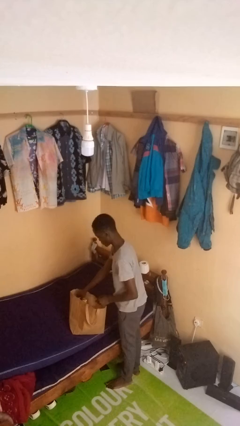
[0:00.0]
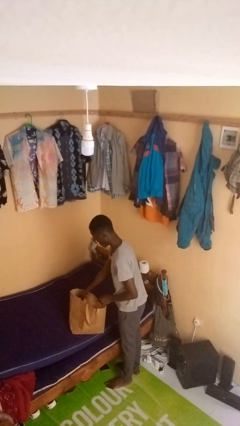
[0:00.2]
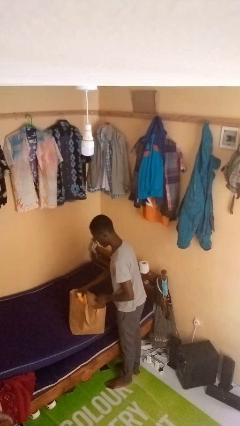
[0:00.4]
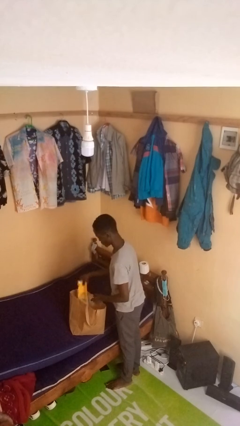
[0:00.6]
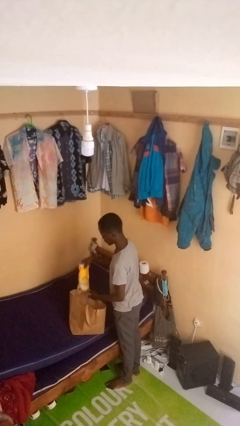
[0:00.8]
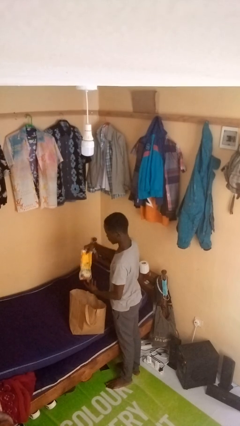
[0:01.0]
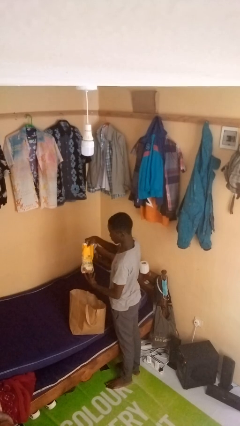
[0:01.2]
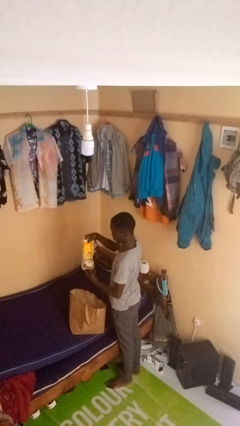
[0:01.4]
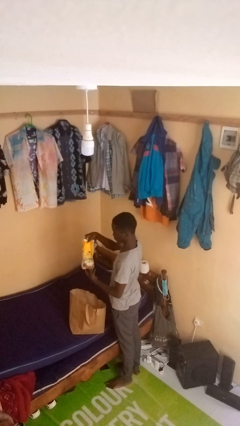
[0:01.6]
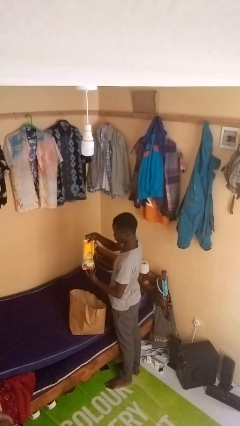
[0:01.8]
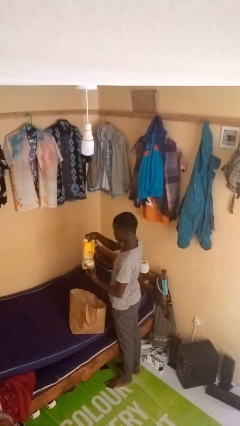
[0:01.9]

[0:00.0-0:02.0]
person takes object from bag

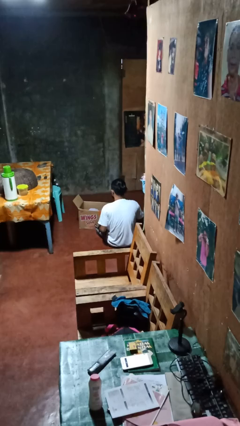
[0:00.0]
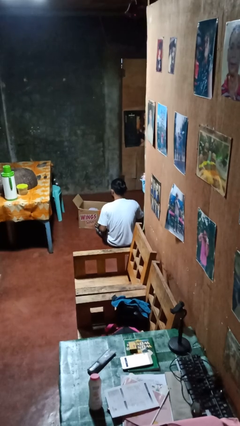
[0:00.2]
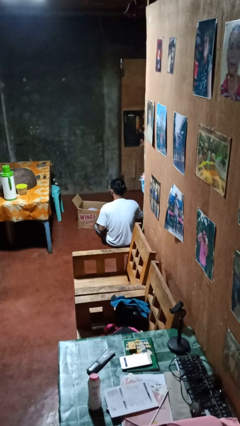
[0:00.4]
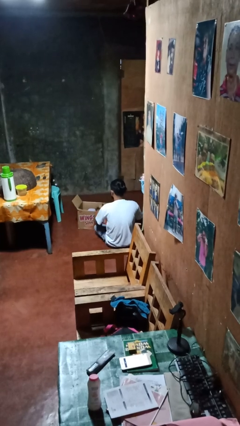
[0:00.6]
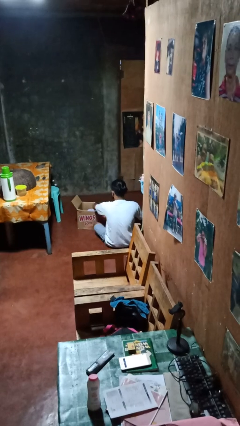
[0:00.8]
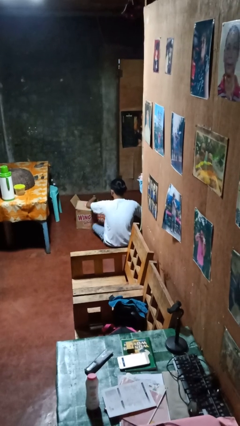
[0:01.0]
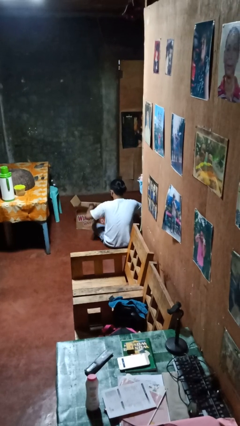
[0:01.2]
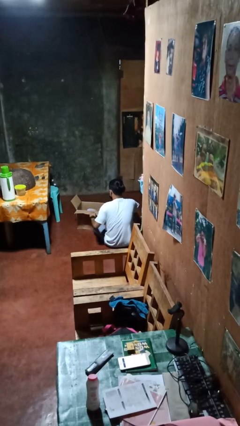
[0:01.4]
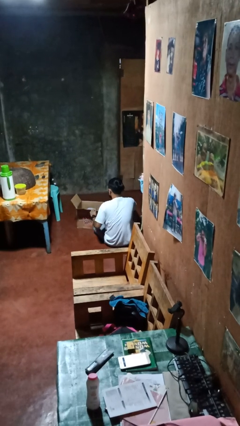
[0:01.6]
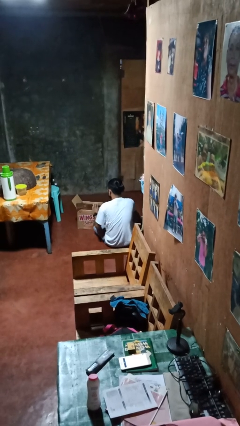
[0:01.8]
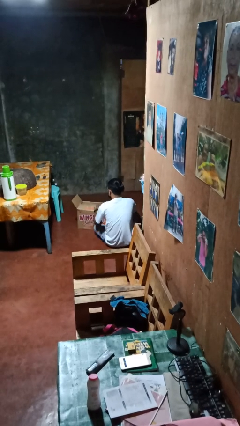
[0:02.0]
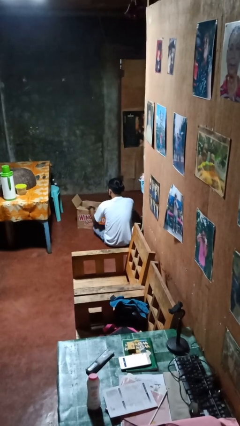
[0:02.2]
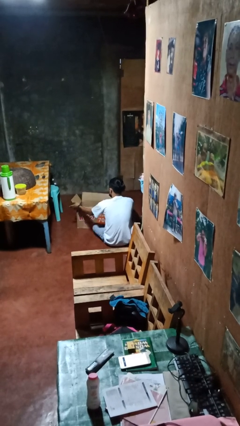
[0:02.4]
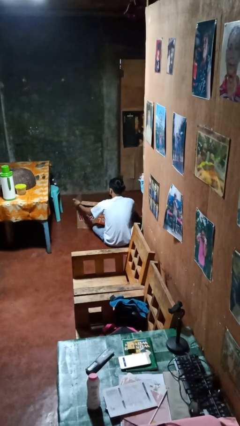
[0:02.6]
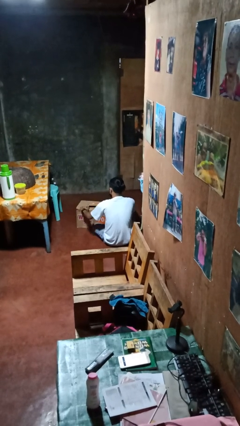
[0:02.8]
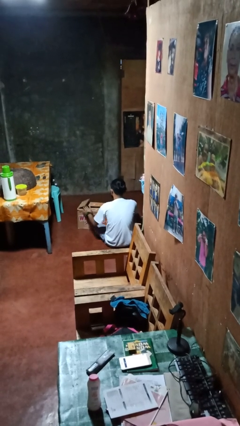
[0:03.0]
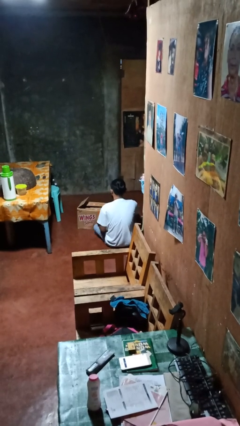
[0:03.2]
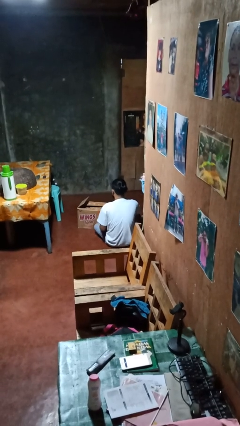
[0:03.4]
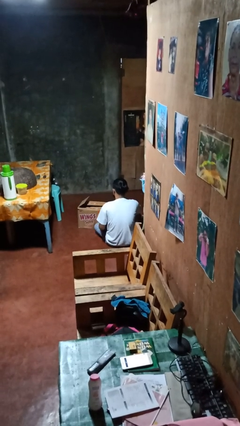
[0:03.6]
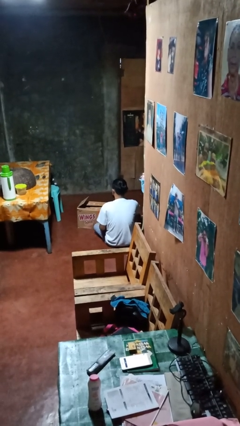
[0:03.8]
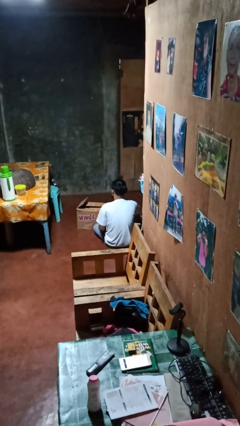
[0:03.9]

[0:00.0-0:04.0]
person closes box

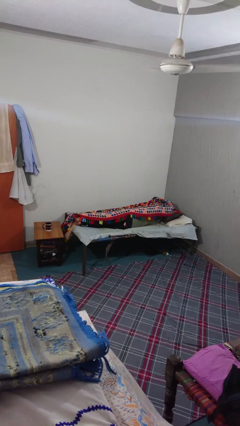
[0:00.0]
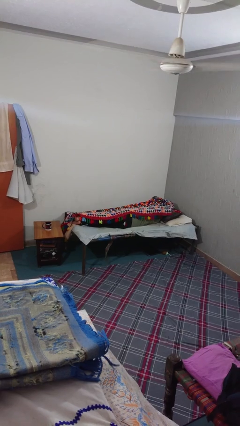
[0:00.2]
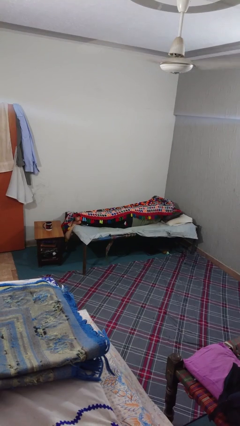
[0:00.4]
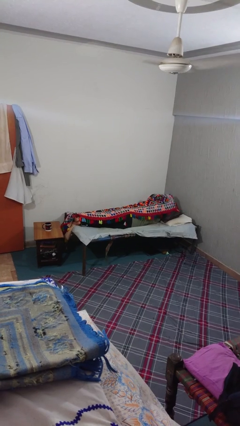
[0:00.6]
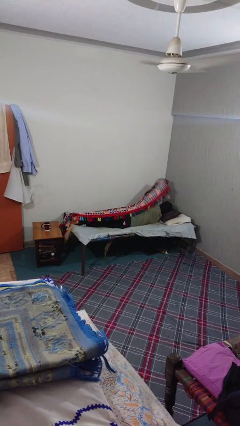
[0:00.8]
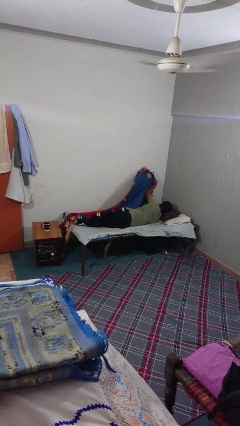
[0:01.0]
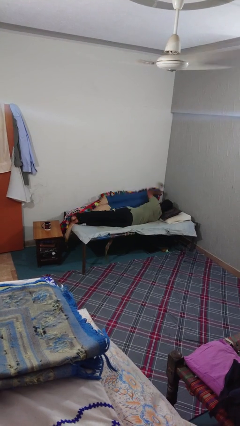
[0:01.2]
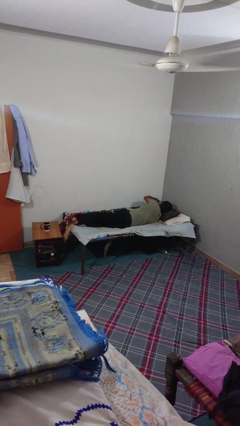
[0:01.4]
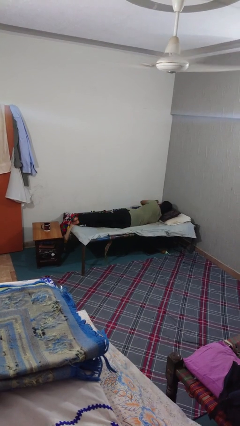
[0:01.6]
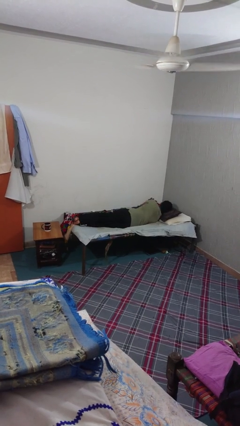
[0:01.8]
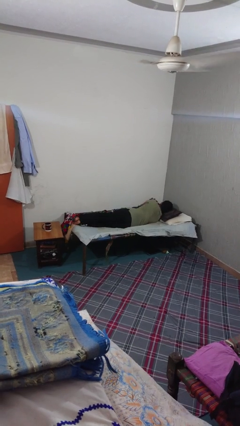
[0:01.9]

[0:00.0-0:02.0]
person uncovers with blanket

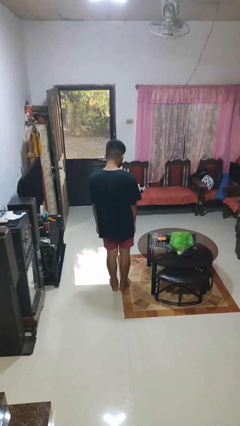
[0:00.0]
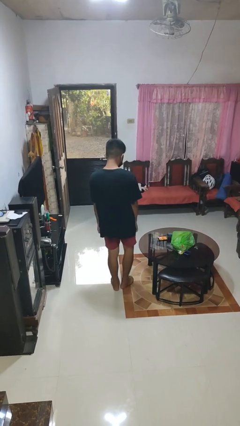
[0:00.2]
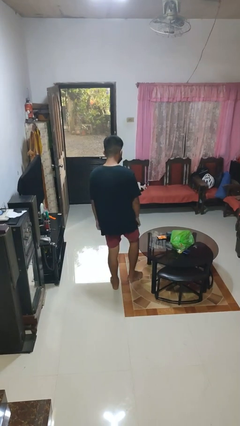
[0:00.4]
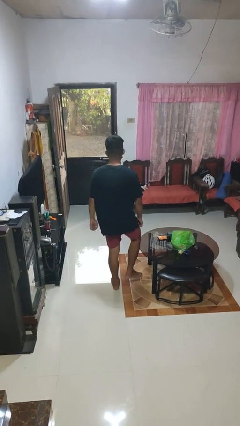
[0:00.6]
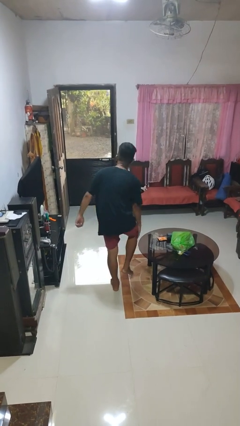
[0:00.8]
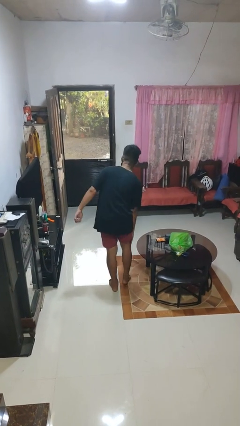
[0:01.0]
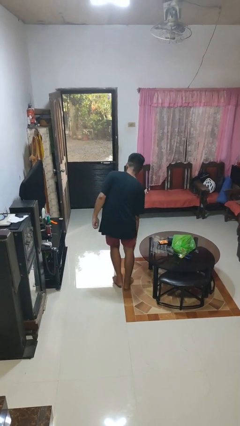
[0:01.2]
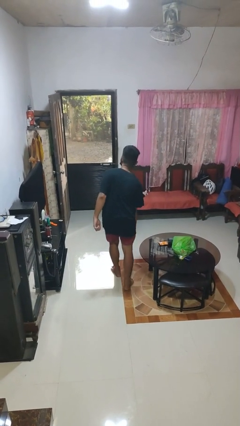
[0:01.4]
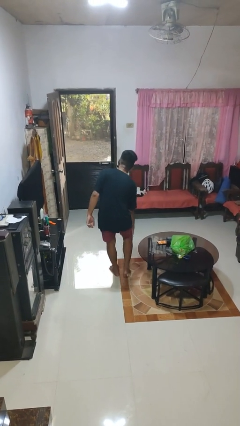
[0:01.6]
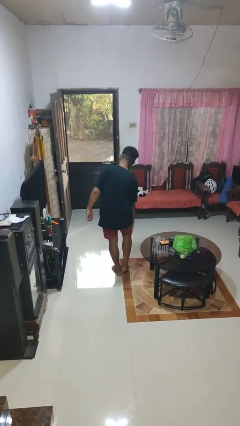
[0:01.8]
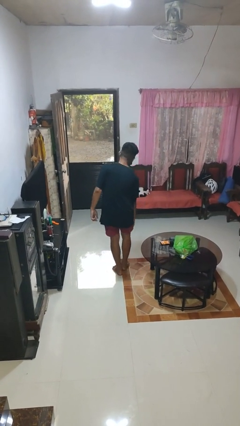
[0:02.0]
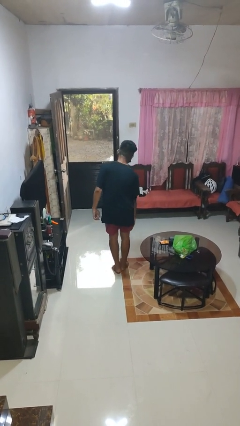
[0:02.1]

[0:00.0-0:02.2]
person bumps into table

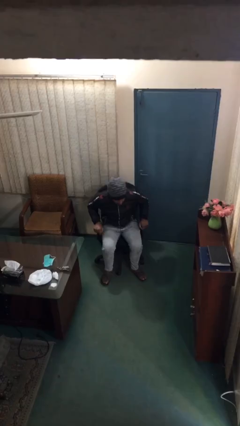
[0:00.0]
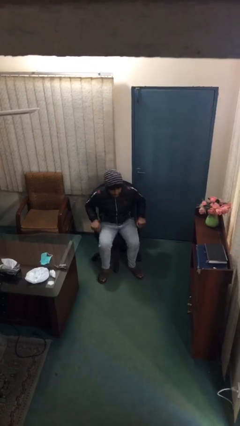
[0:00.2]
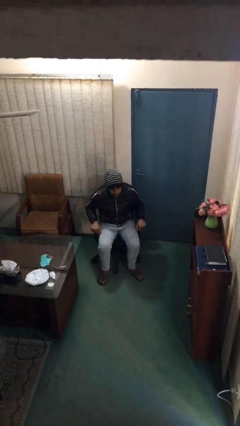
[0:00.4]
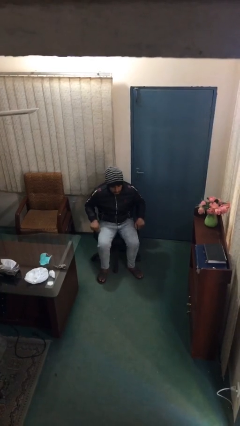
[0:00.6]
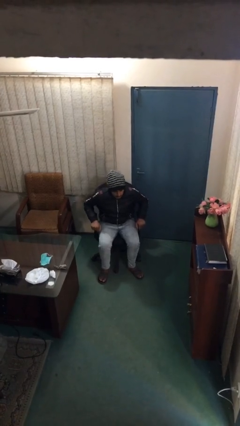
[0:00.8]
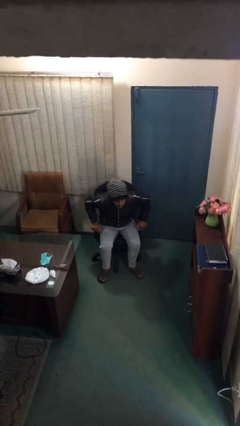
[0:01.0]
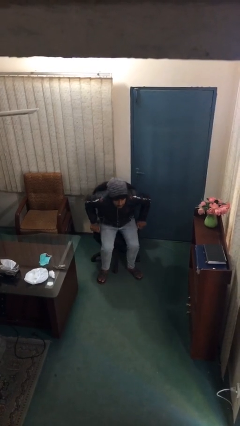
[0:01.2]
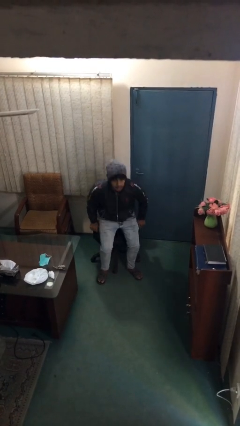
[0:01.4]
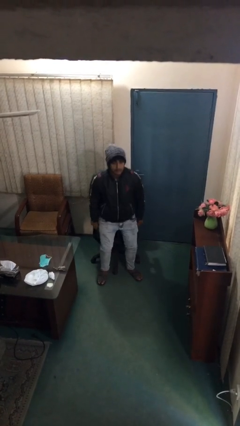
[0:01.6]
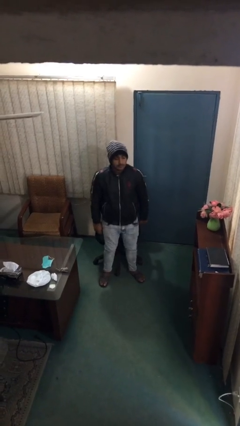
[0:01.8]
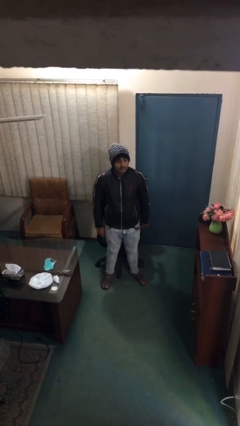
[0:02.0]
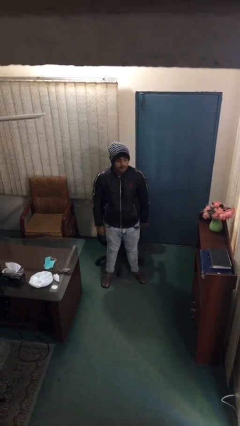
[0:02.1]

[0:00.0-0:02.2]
person stands up

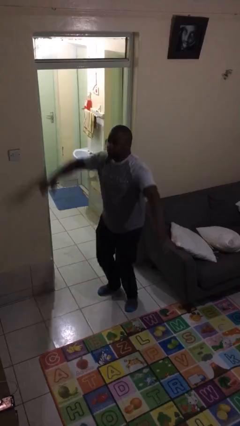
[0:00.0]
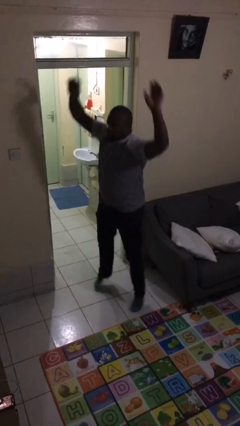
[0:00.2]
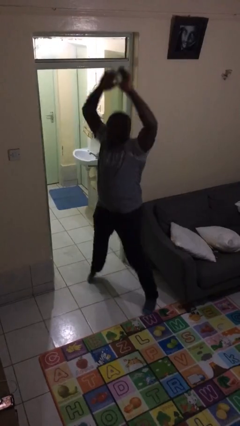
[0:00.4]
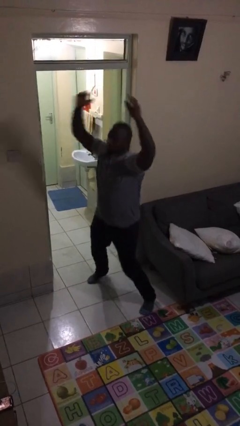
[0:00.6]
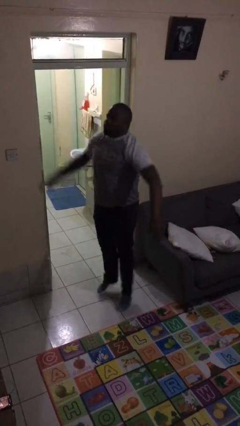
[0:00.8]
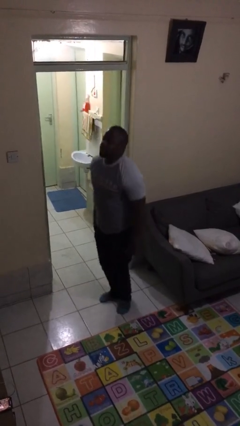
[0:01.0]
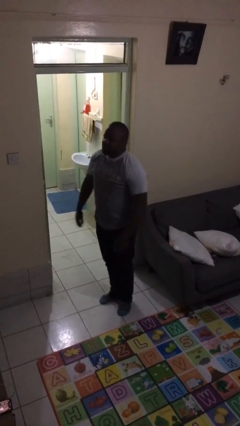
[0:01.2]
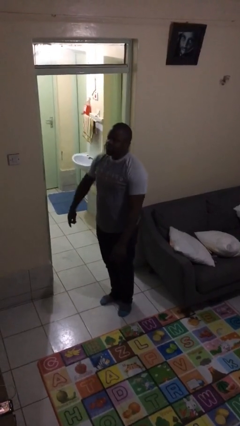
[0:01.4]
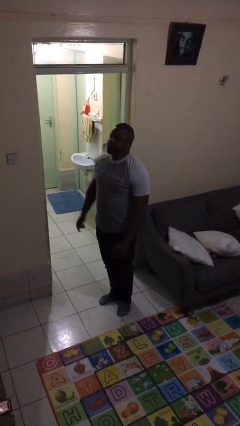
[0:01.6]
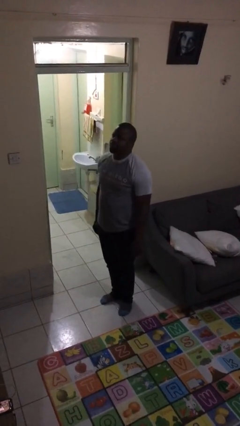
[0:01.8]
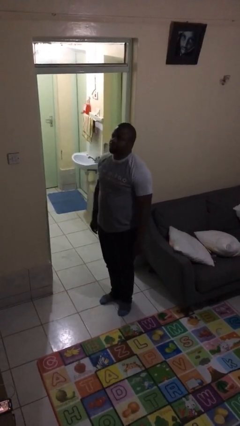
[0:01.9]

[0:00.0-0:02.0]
person exercises with jumping jacks

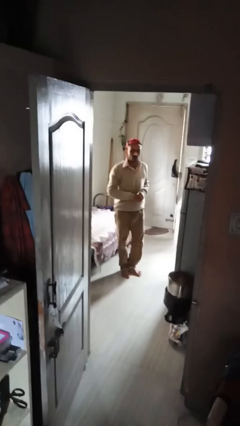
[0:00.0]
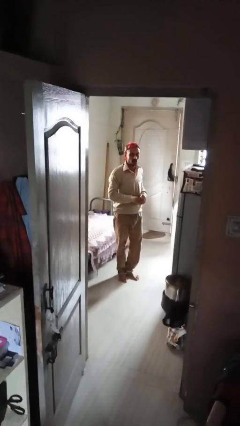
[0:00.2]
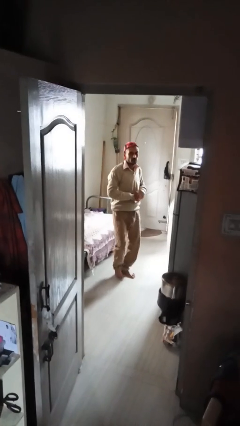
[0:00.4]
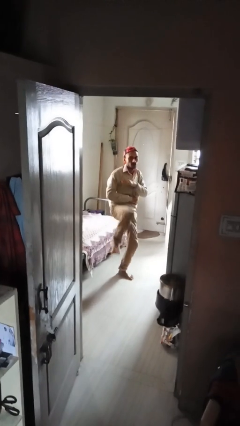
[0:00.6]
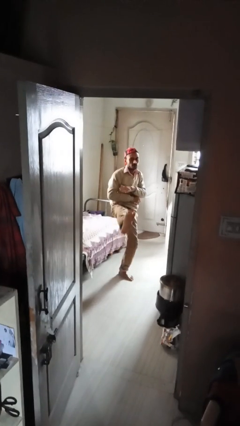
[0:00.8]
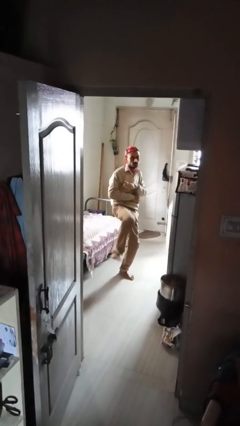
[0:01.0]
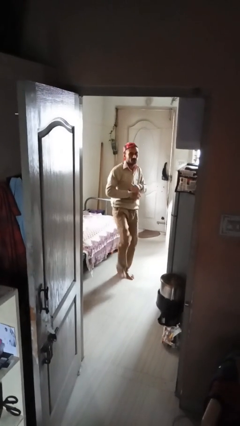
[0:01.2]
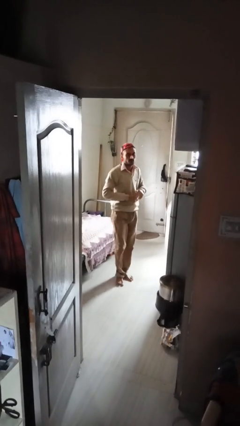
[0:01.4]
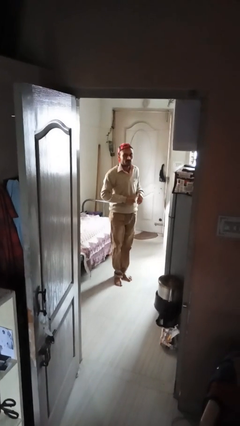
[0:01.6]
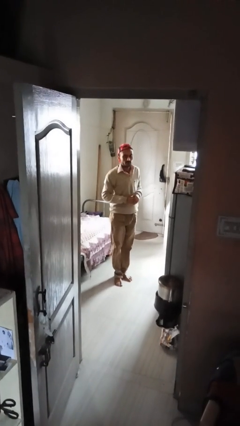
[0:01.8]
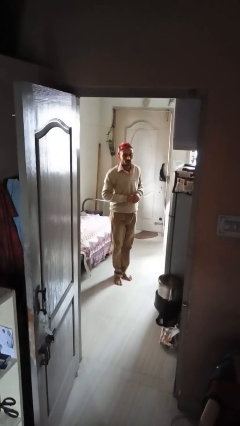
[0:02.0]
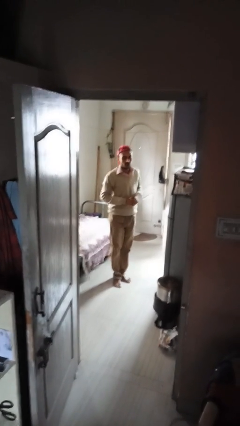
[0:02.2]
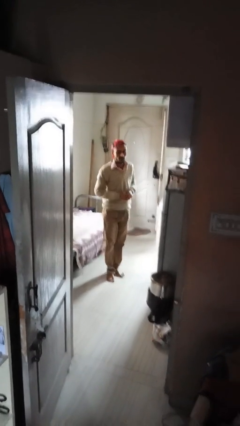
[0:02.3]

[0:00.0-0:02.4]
person karate kicks

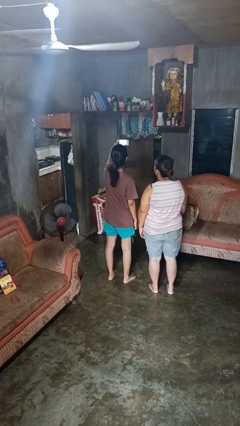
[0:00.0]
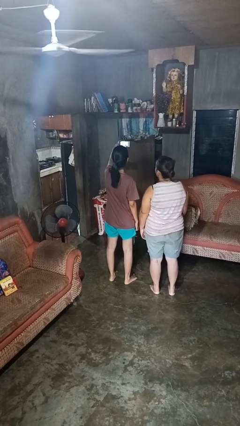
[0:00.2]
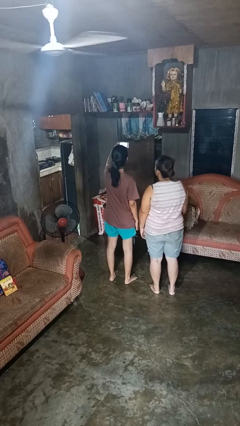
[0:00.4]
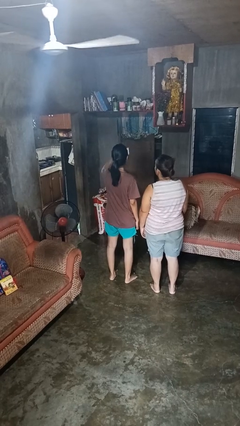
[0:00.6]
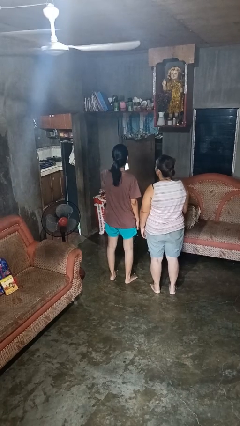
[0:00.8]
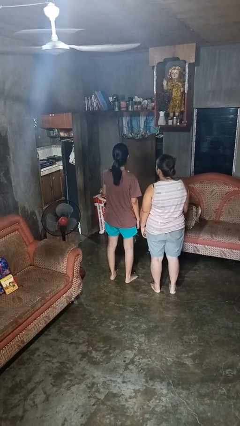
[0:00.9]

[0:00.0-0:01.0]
person takes selfie with person
